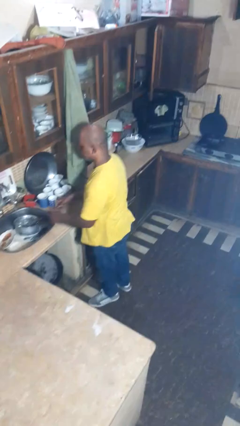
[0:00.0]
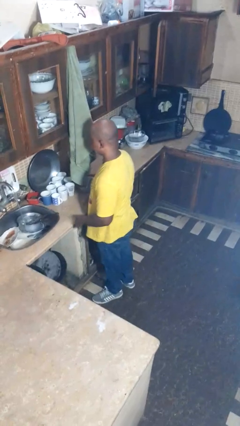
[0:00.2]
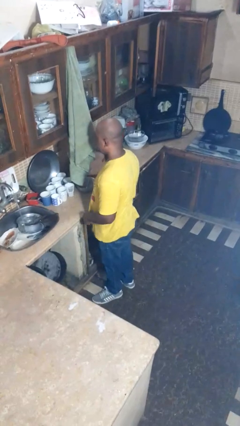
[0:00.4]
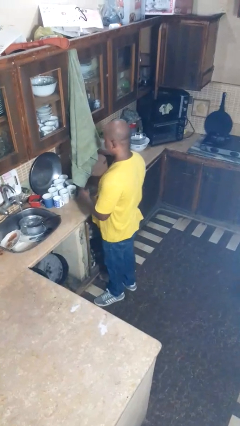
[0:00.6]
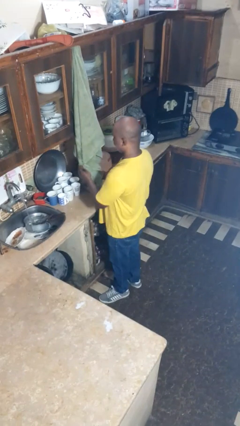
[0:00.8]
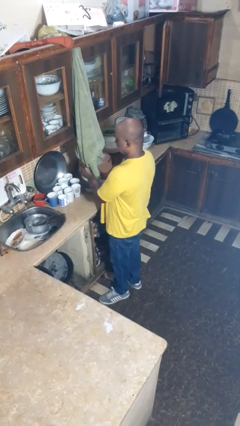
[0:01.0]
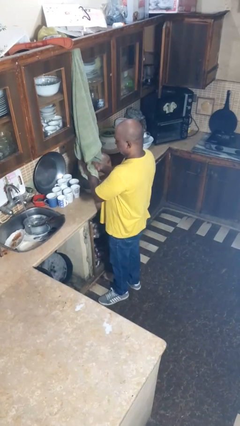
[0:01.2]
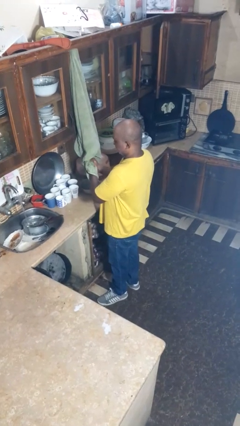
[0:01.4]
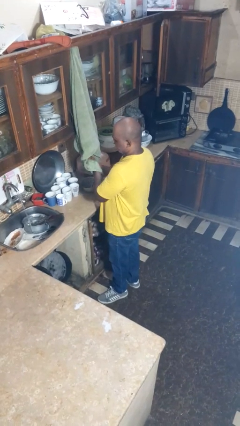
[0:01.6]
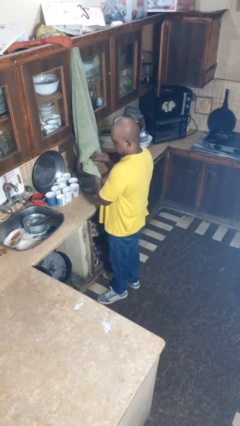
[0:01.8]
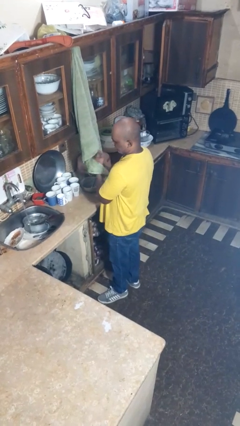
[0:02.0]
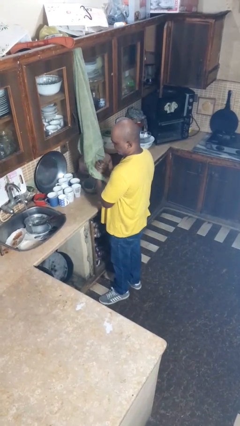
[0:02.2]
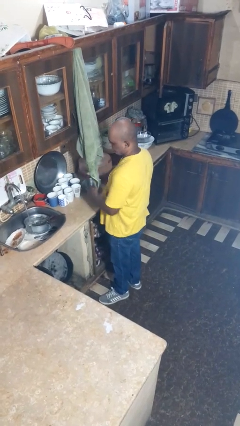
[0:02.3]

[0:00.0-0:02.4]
person dries hands with towel

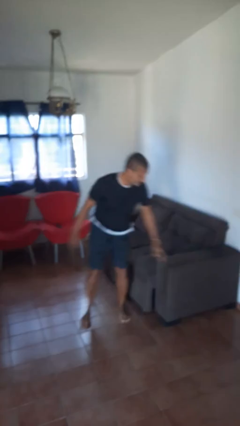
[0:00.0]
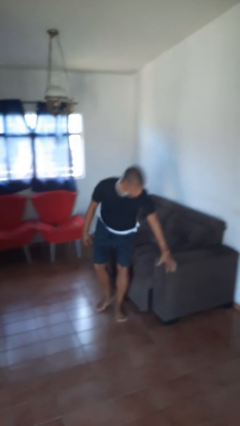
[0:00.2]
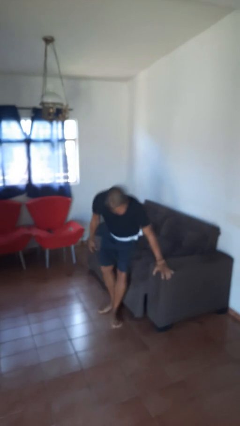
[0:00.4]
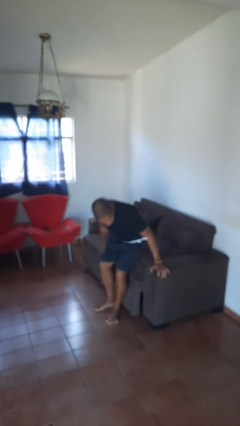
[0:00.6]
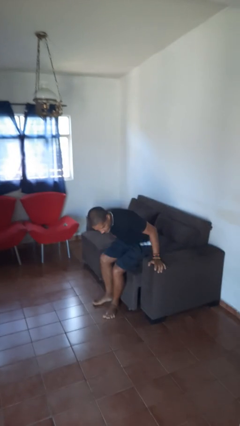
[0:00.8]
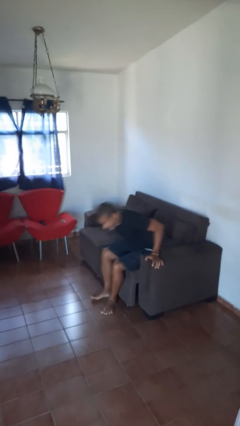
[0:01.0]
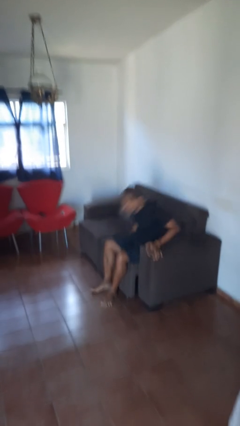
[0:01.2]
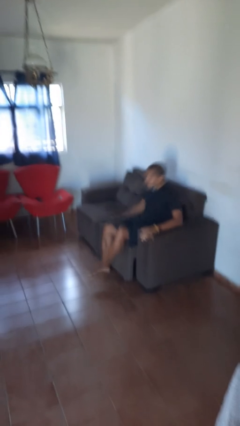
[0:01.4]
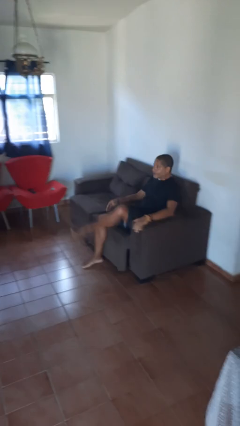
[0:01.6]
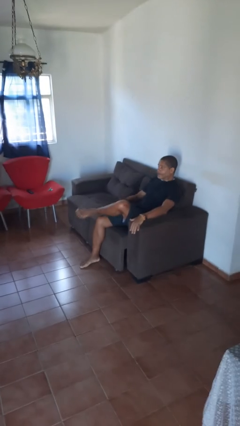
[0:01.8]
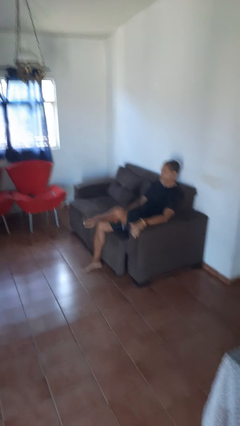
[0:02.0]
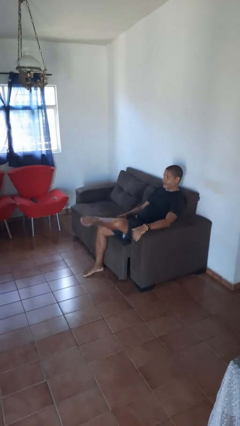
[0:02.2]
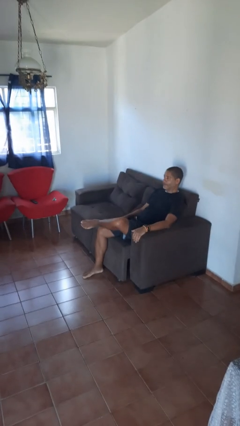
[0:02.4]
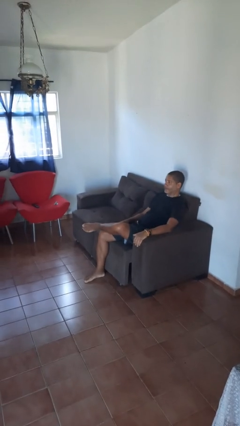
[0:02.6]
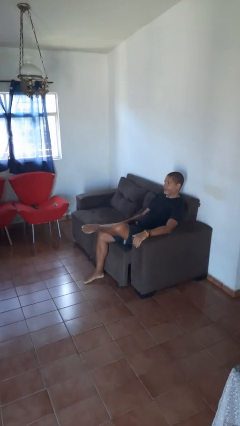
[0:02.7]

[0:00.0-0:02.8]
person lies down on couch

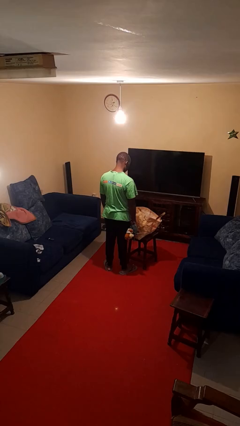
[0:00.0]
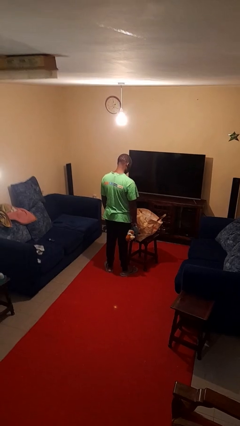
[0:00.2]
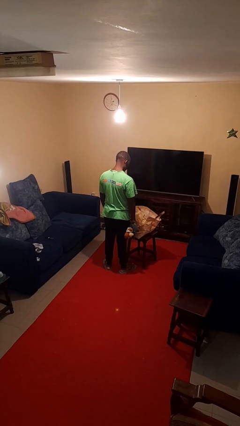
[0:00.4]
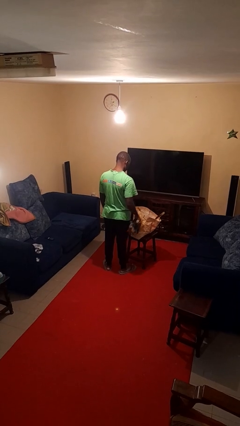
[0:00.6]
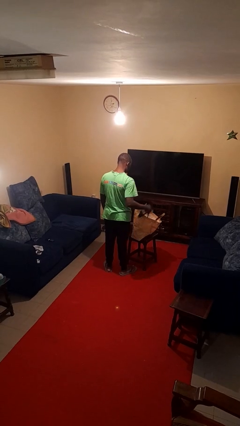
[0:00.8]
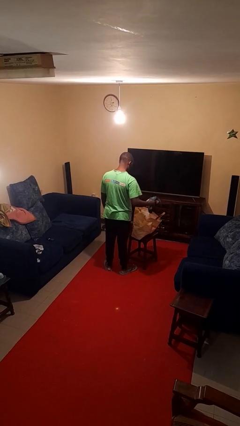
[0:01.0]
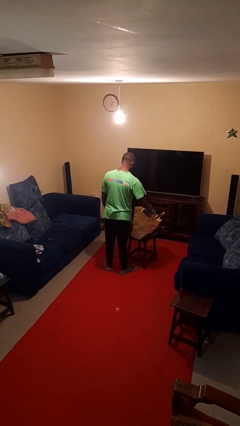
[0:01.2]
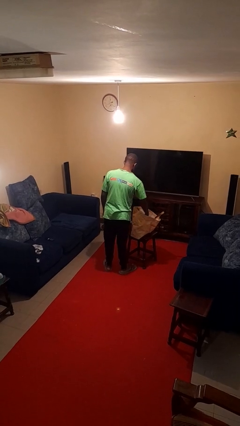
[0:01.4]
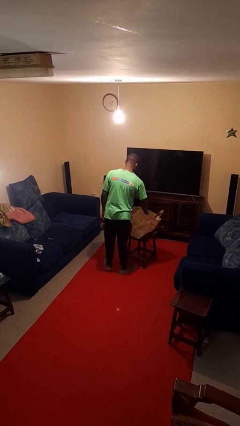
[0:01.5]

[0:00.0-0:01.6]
person puts object into bag

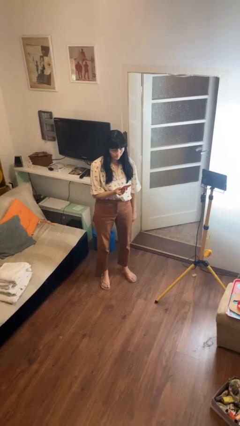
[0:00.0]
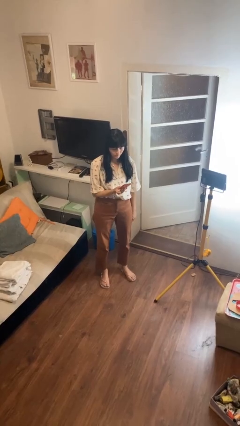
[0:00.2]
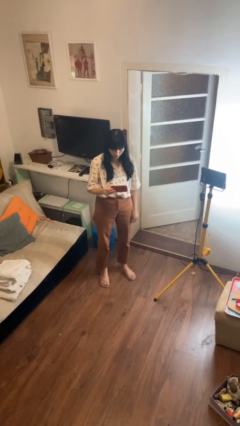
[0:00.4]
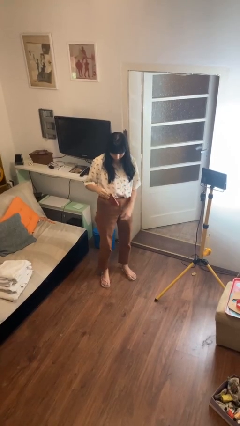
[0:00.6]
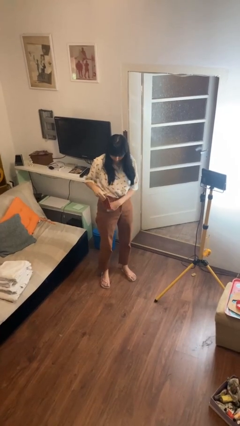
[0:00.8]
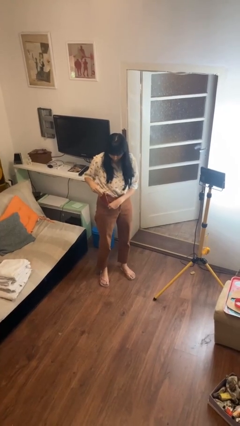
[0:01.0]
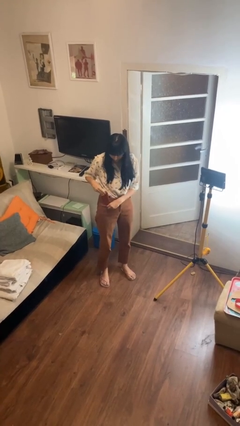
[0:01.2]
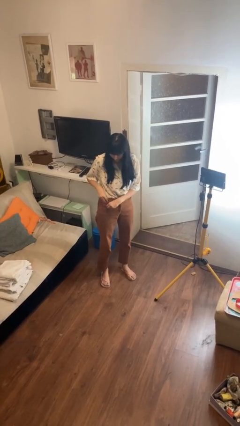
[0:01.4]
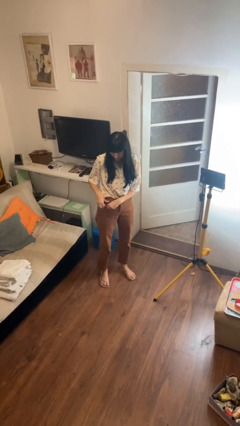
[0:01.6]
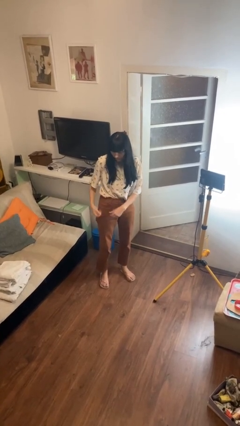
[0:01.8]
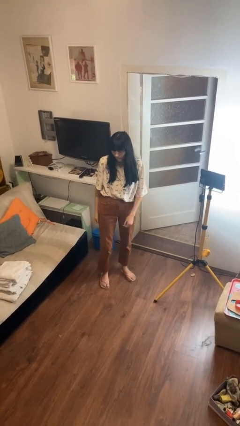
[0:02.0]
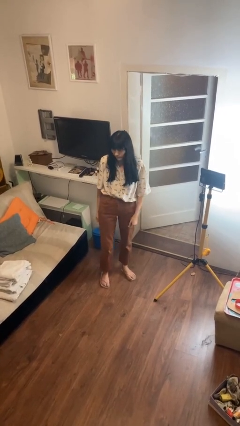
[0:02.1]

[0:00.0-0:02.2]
person puts phone into pocket

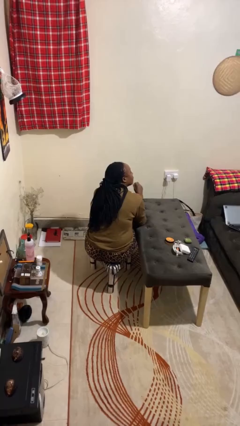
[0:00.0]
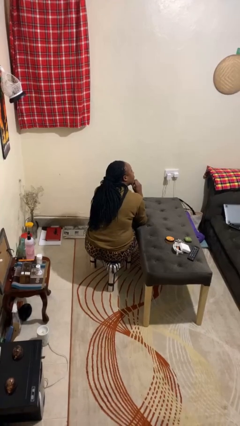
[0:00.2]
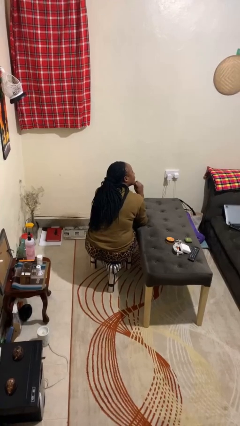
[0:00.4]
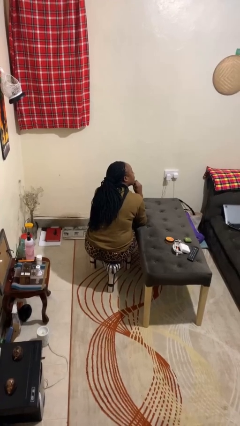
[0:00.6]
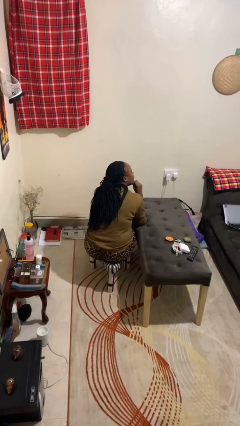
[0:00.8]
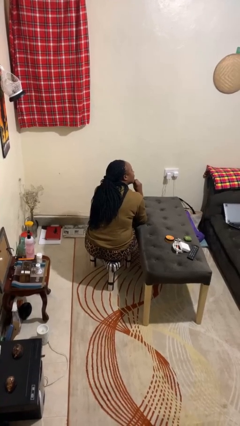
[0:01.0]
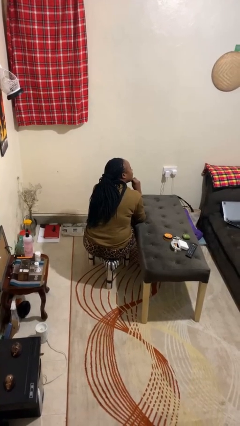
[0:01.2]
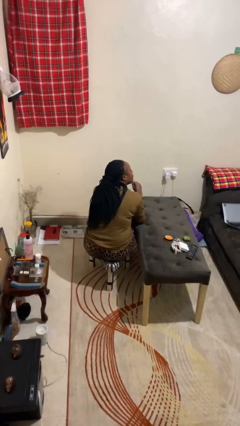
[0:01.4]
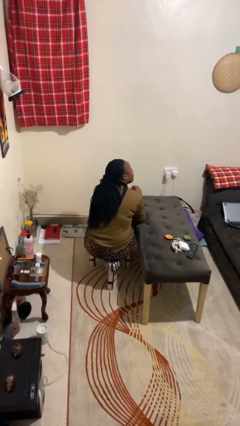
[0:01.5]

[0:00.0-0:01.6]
person strokes chin

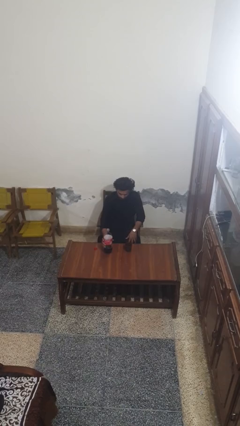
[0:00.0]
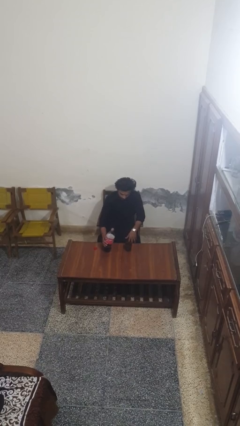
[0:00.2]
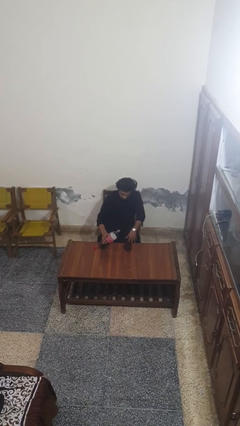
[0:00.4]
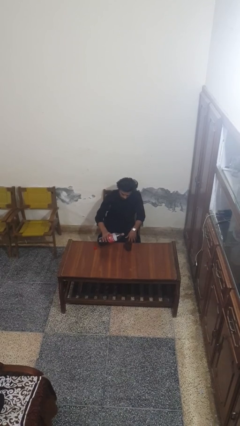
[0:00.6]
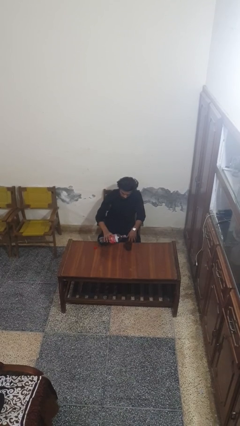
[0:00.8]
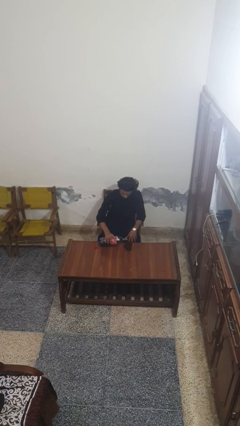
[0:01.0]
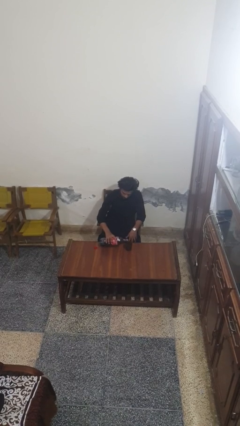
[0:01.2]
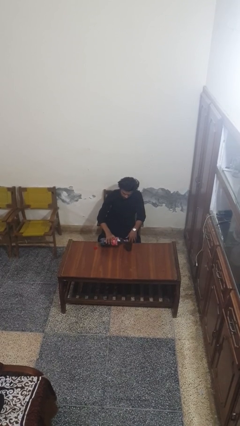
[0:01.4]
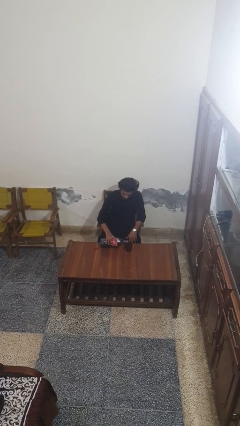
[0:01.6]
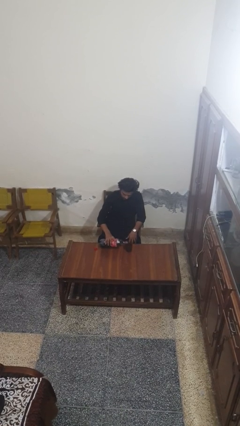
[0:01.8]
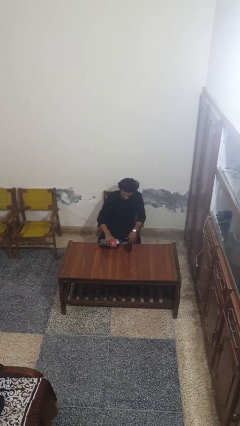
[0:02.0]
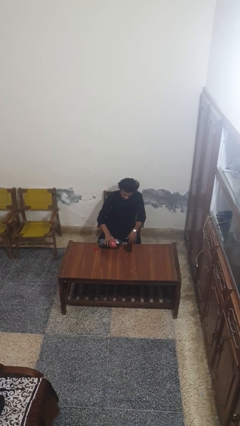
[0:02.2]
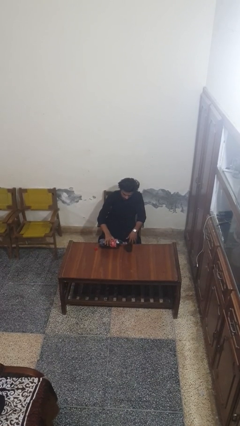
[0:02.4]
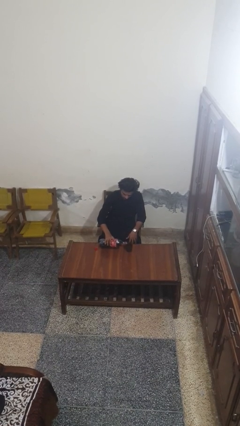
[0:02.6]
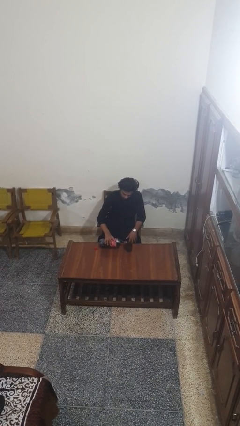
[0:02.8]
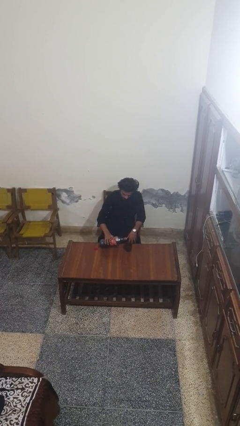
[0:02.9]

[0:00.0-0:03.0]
person pours liquid into cup

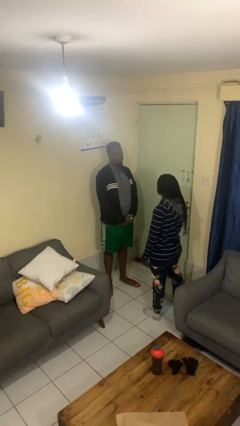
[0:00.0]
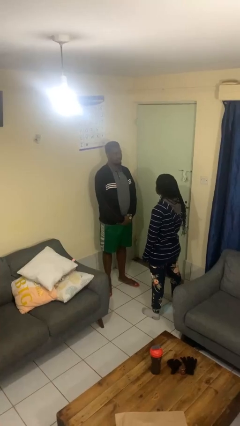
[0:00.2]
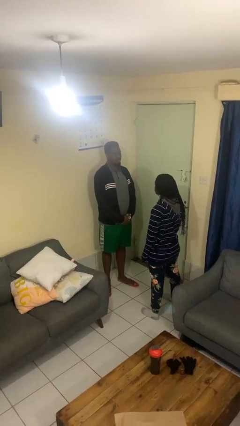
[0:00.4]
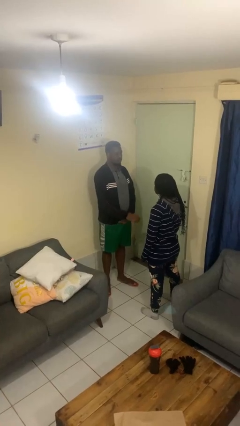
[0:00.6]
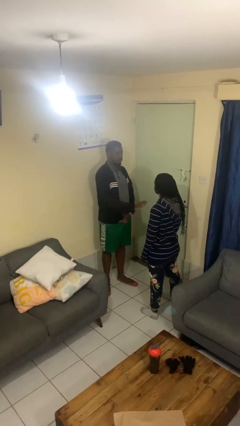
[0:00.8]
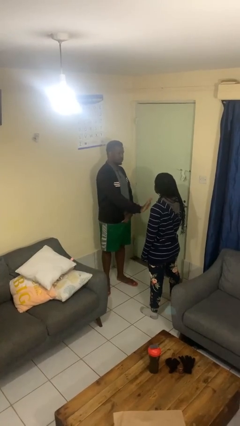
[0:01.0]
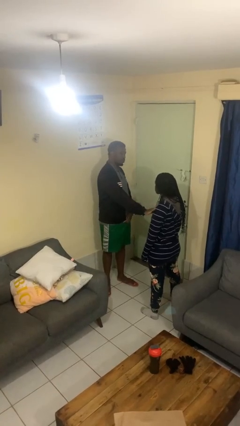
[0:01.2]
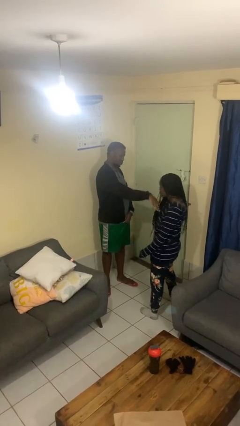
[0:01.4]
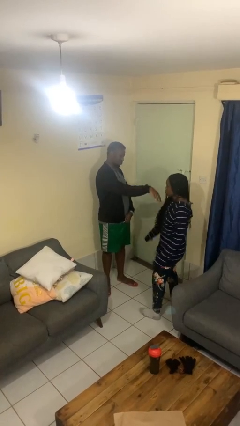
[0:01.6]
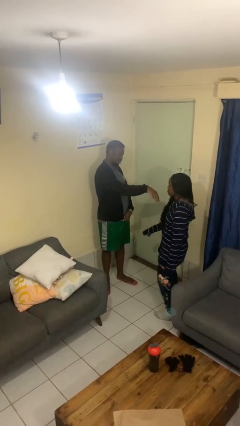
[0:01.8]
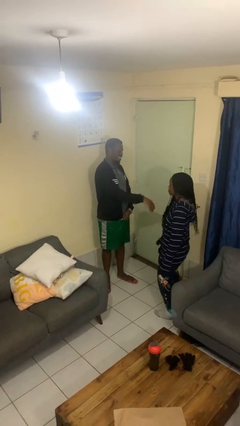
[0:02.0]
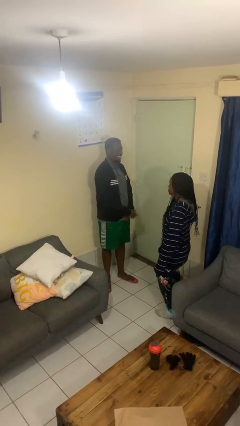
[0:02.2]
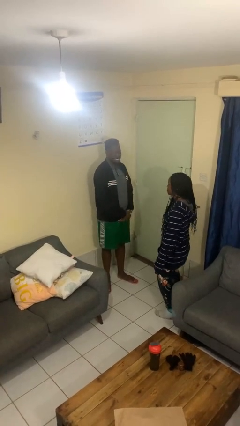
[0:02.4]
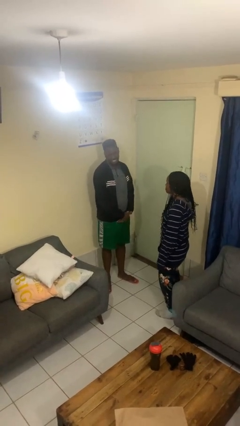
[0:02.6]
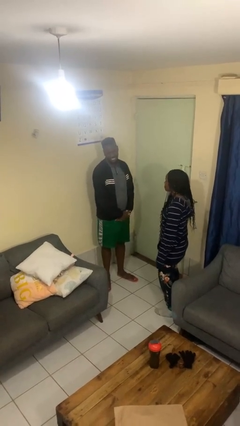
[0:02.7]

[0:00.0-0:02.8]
person shoves person

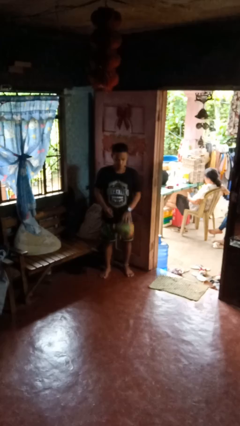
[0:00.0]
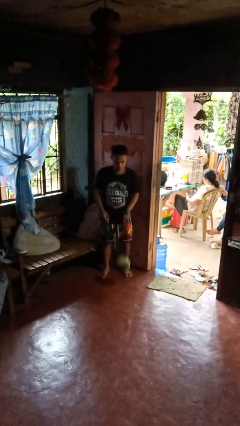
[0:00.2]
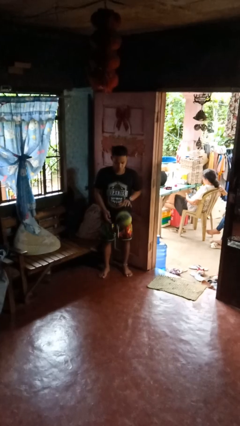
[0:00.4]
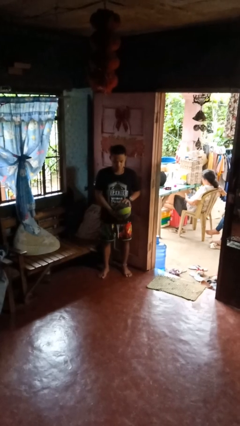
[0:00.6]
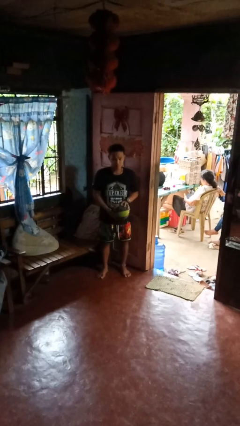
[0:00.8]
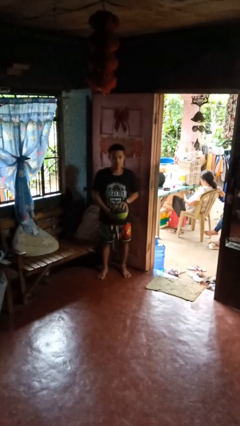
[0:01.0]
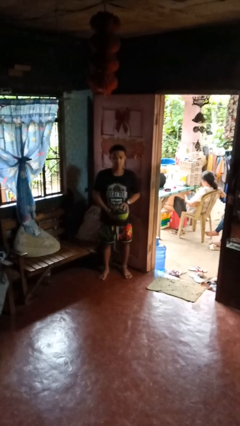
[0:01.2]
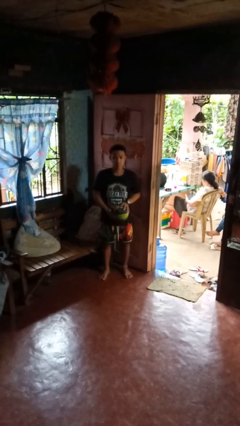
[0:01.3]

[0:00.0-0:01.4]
person bounces ball on floor
